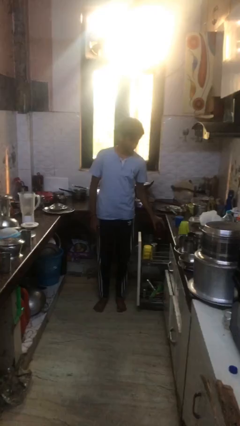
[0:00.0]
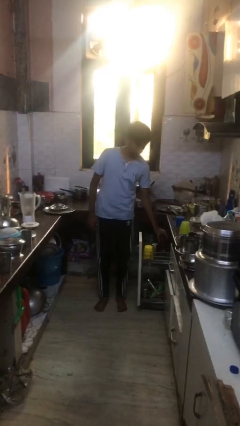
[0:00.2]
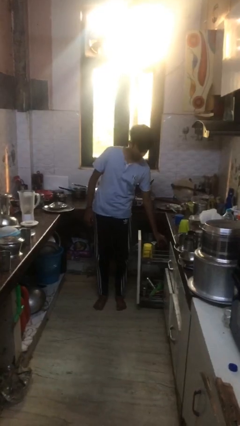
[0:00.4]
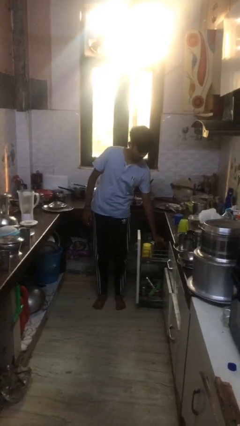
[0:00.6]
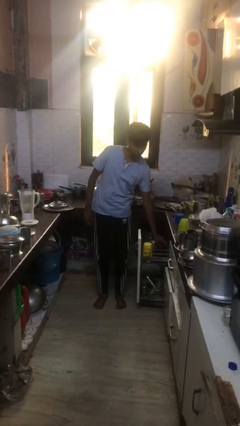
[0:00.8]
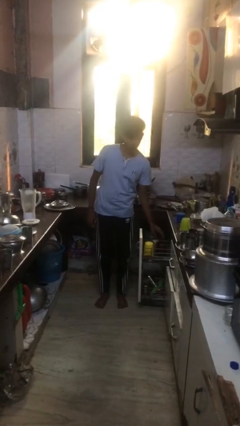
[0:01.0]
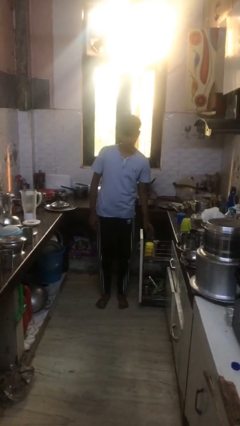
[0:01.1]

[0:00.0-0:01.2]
person loads dishwasher

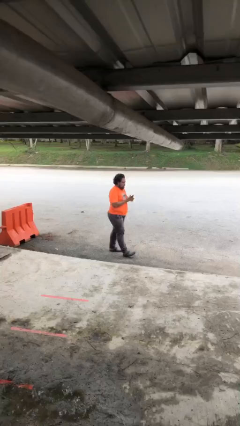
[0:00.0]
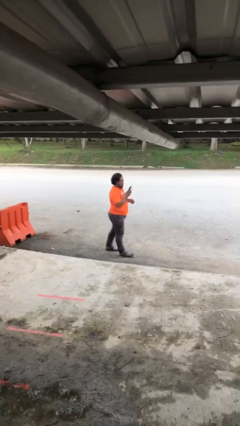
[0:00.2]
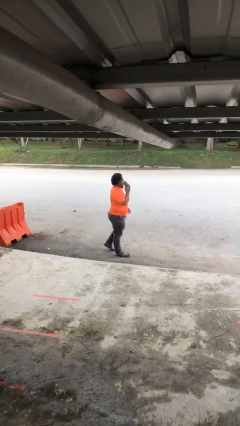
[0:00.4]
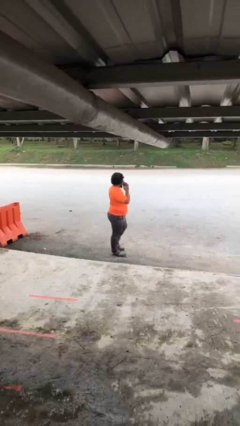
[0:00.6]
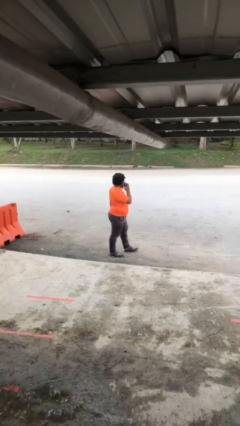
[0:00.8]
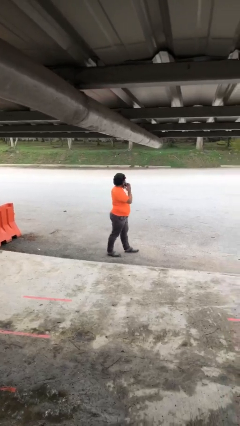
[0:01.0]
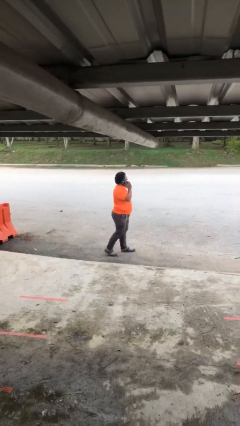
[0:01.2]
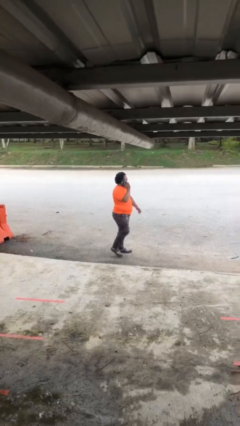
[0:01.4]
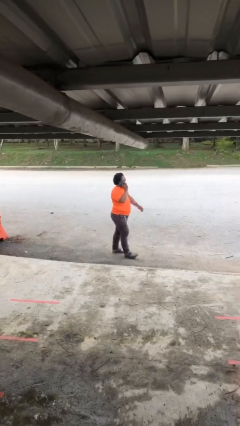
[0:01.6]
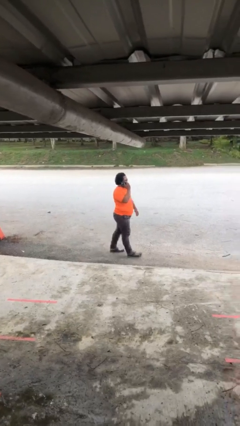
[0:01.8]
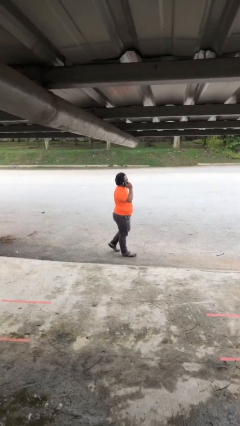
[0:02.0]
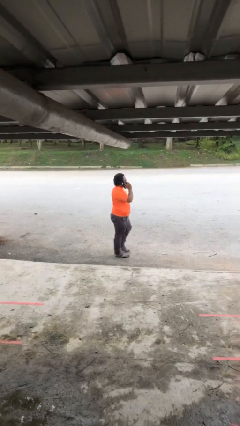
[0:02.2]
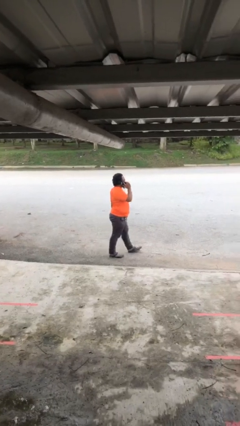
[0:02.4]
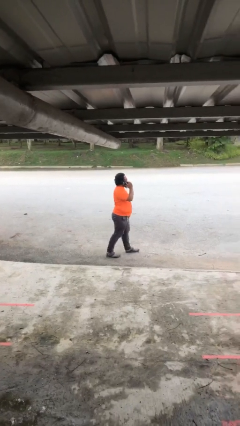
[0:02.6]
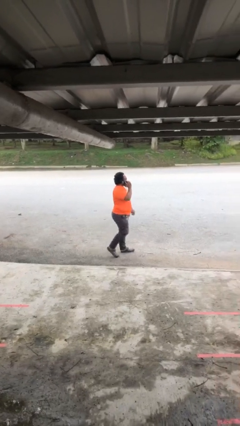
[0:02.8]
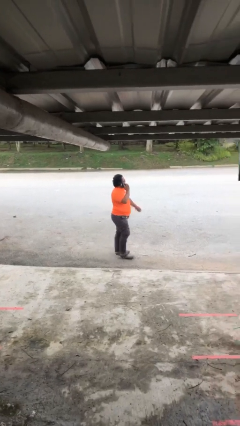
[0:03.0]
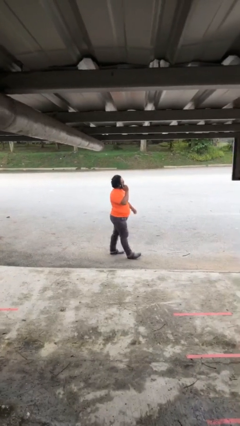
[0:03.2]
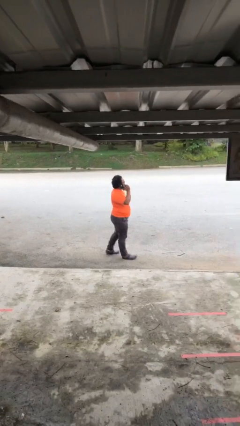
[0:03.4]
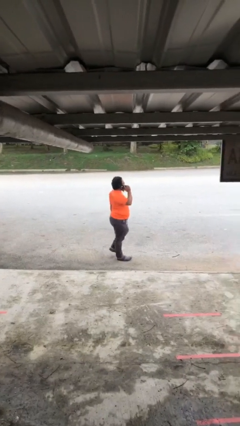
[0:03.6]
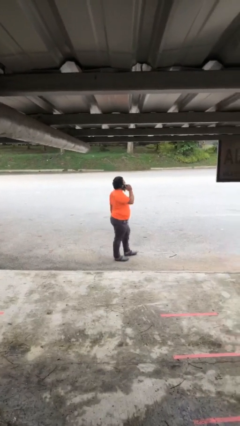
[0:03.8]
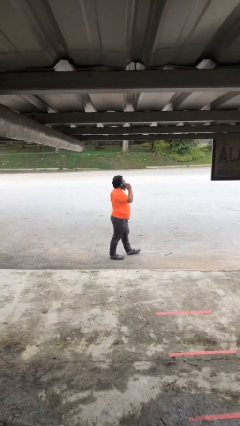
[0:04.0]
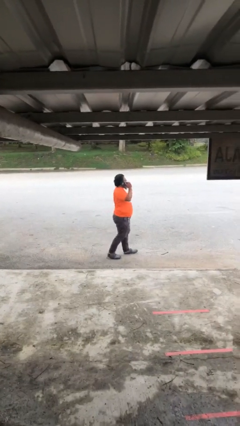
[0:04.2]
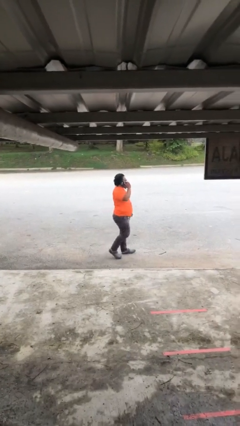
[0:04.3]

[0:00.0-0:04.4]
person talks on phone

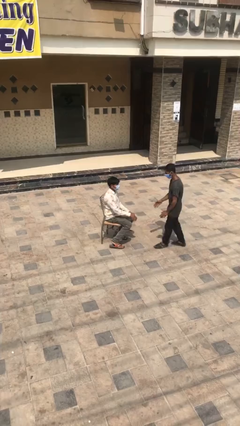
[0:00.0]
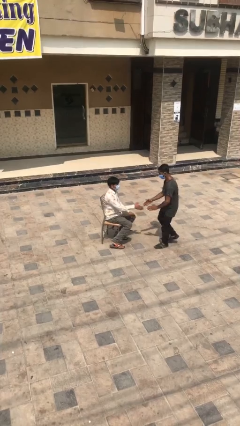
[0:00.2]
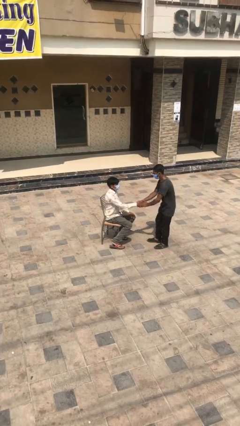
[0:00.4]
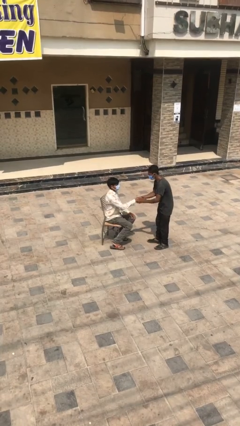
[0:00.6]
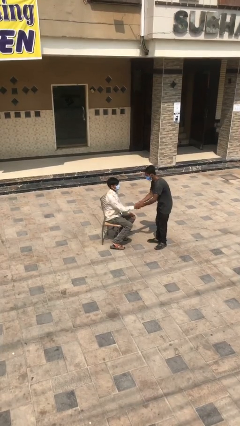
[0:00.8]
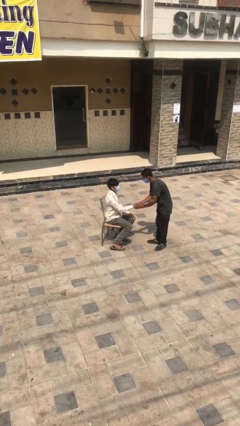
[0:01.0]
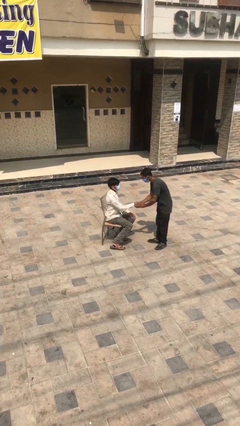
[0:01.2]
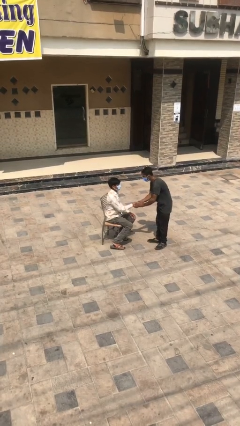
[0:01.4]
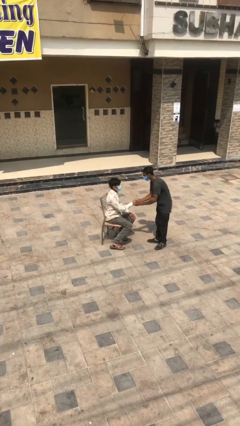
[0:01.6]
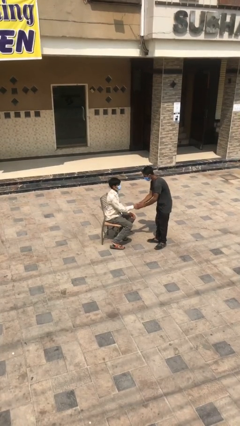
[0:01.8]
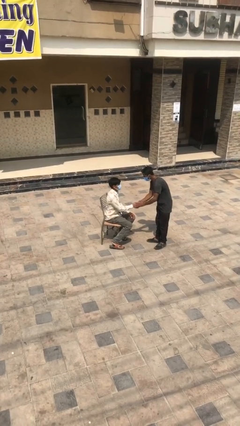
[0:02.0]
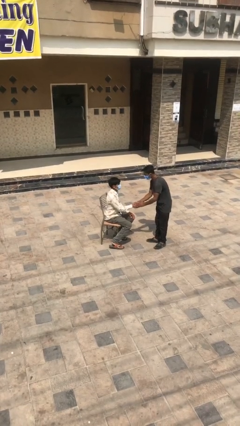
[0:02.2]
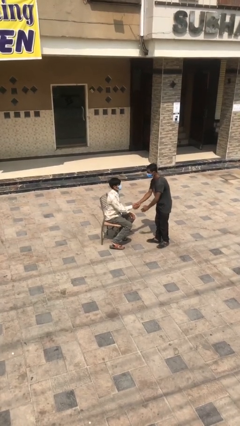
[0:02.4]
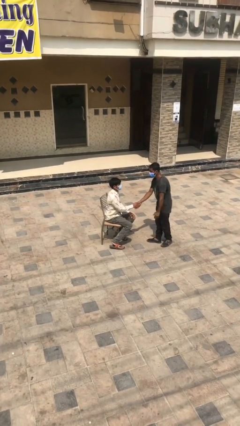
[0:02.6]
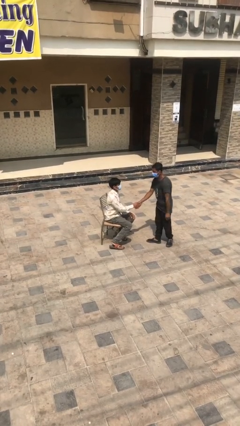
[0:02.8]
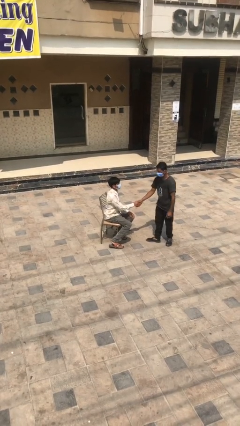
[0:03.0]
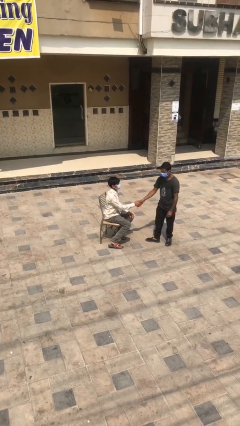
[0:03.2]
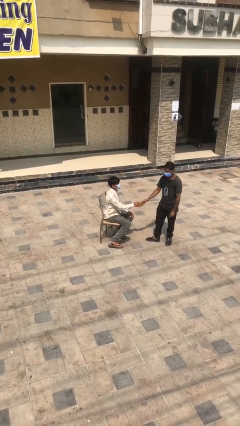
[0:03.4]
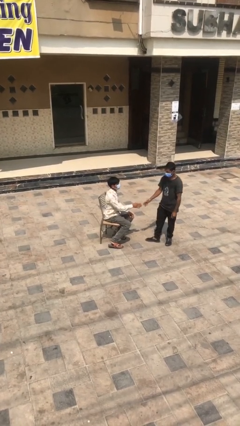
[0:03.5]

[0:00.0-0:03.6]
person shakes hand

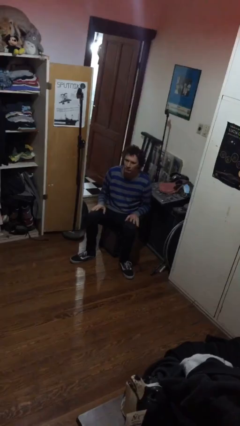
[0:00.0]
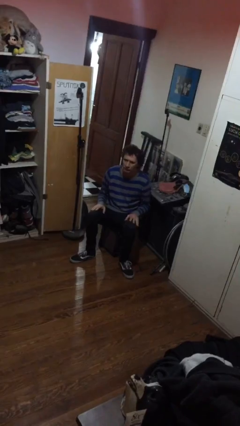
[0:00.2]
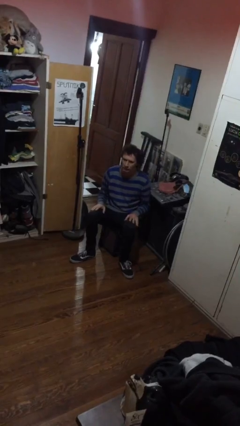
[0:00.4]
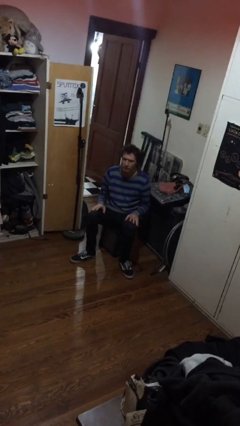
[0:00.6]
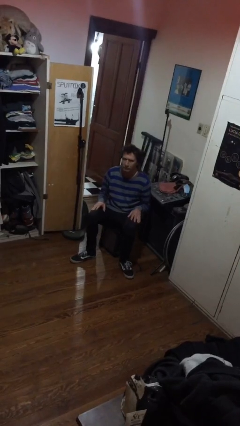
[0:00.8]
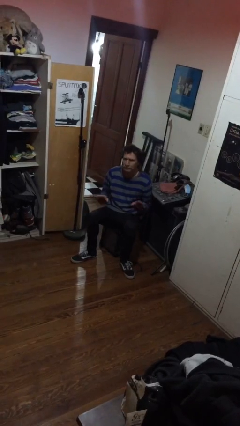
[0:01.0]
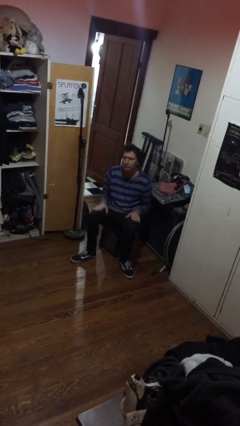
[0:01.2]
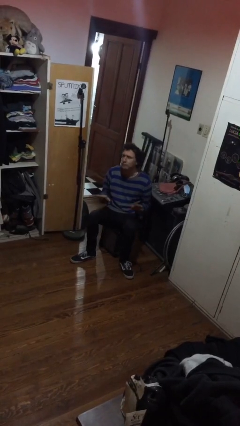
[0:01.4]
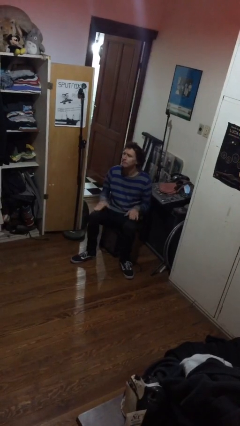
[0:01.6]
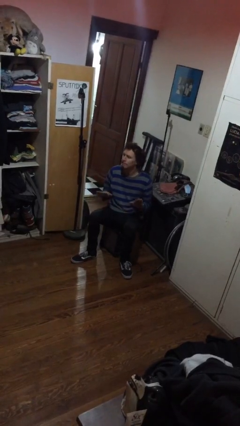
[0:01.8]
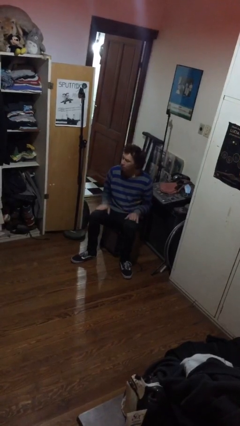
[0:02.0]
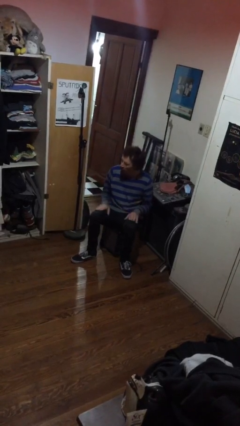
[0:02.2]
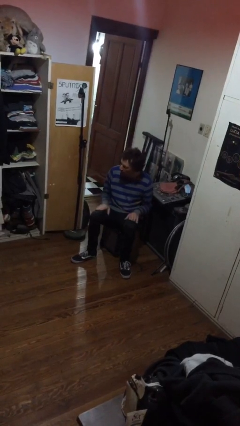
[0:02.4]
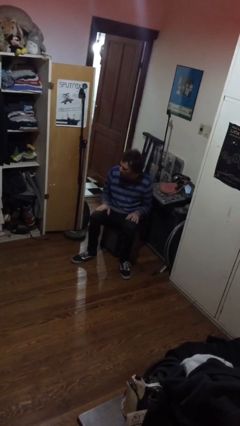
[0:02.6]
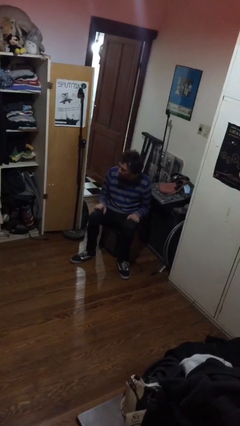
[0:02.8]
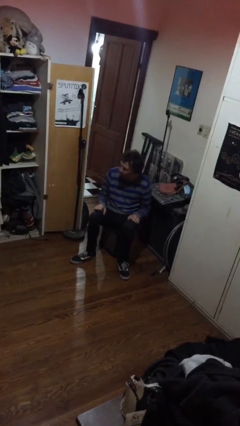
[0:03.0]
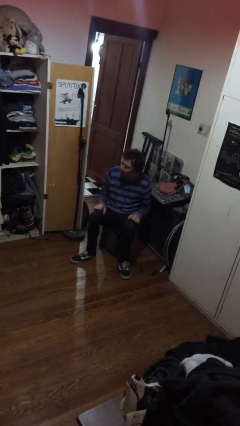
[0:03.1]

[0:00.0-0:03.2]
person slaps hands on thighs

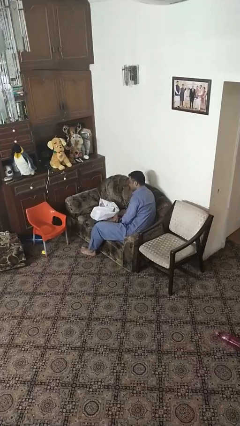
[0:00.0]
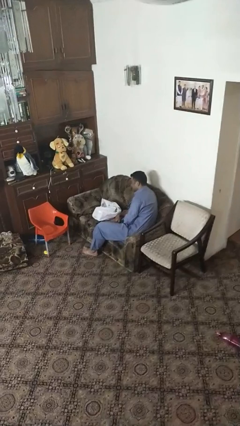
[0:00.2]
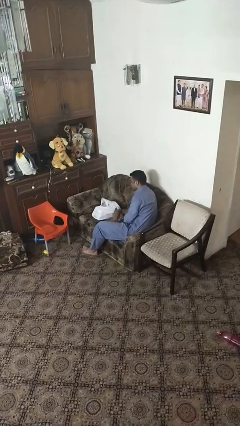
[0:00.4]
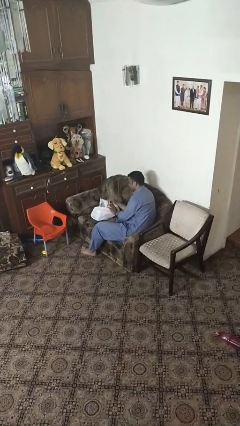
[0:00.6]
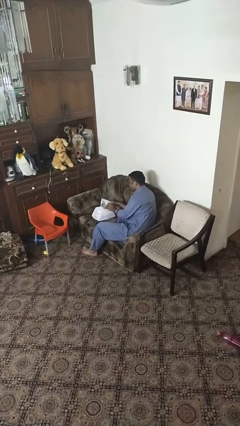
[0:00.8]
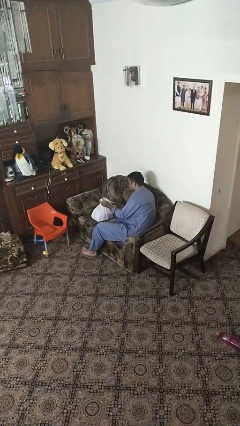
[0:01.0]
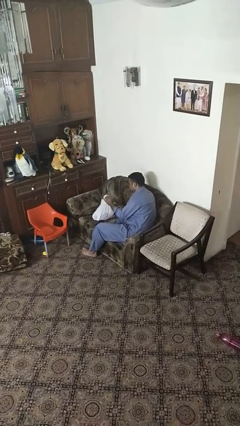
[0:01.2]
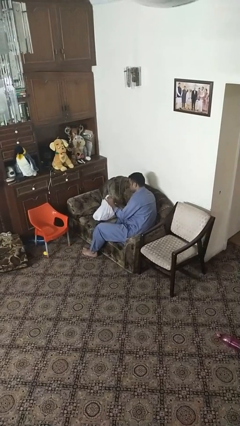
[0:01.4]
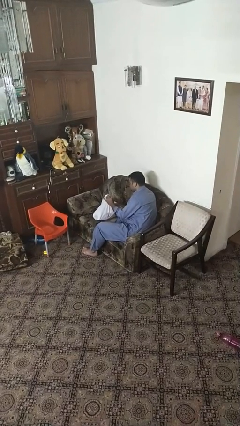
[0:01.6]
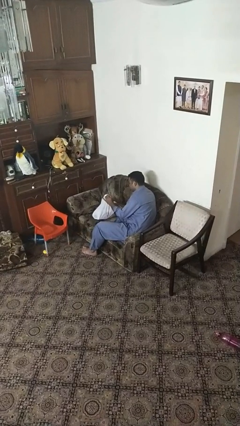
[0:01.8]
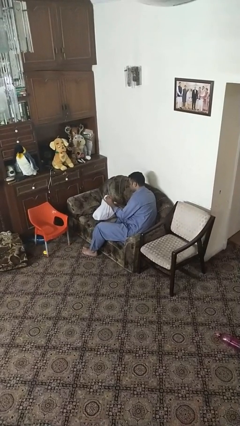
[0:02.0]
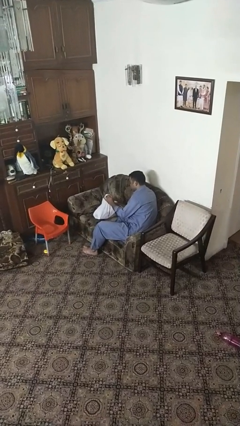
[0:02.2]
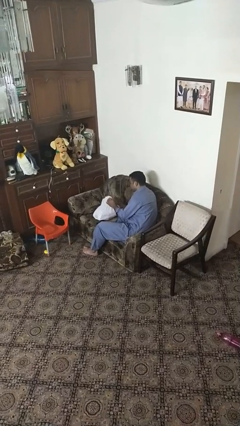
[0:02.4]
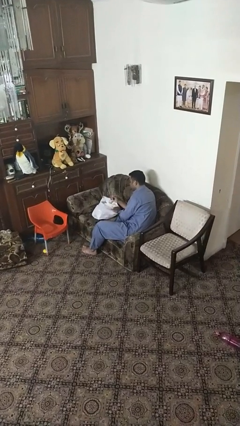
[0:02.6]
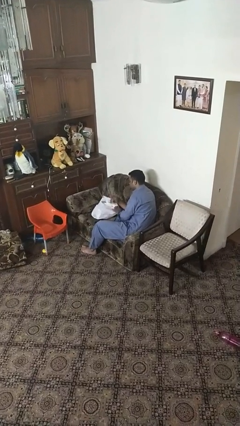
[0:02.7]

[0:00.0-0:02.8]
person searches in bag

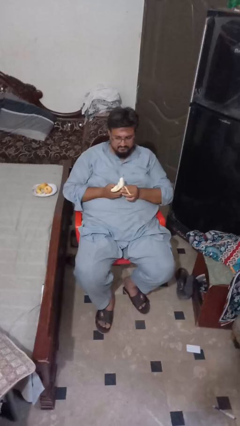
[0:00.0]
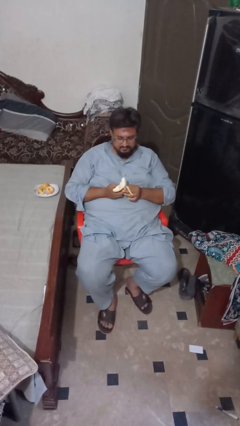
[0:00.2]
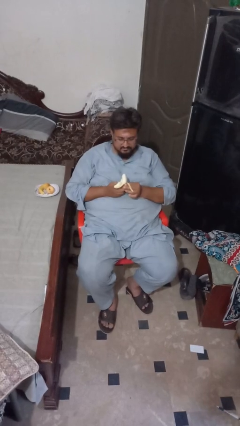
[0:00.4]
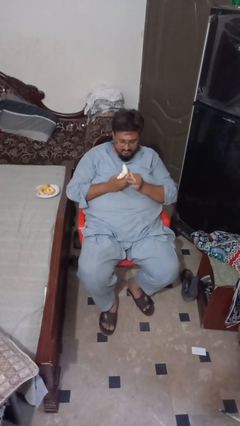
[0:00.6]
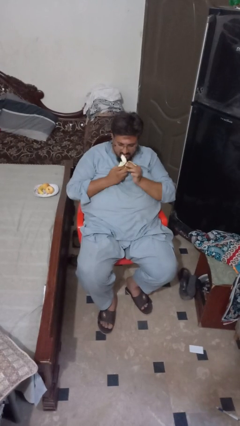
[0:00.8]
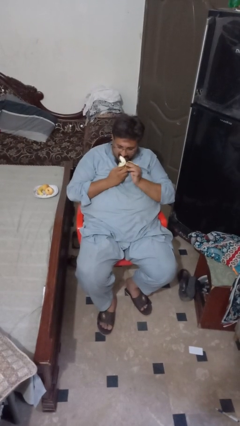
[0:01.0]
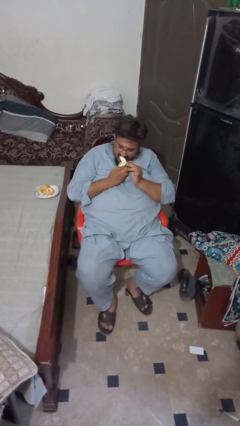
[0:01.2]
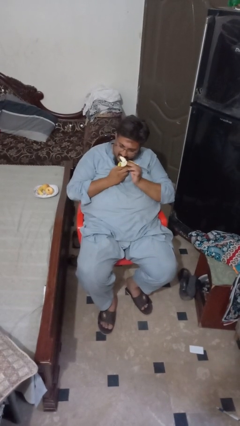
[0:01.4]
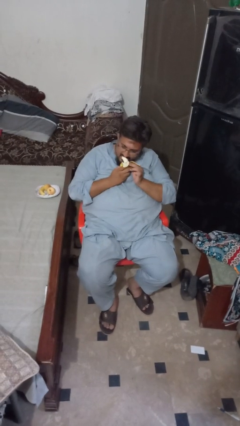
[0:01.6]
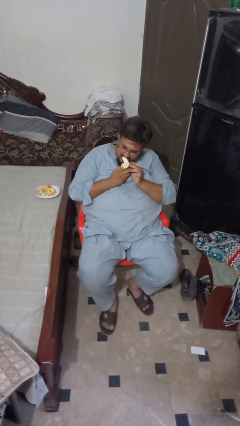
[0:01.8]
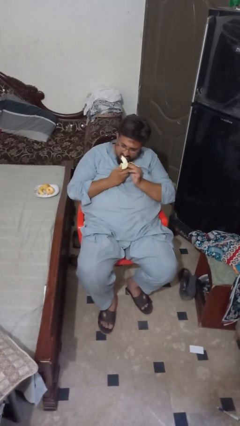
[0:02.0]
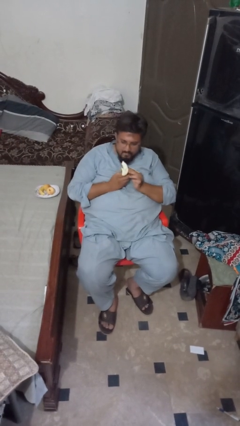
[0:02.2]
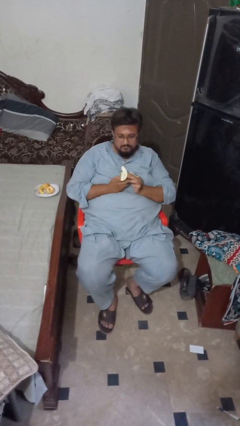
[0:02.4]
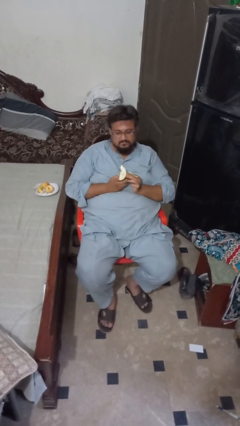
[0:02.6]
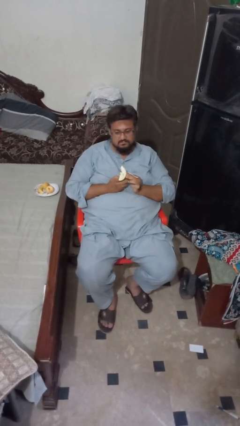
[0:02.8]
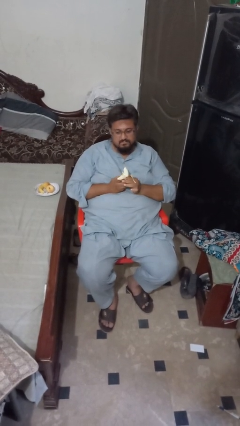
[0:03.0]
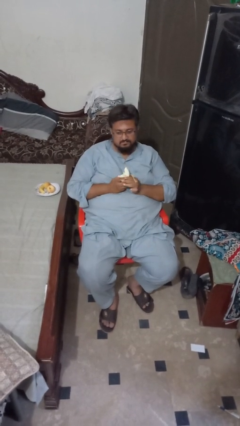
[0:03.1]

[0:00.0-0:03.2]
person eats banana
